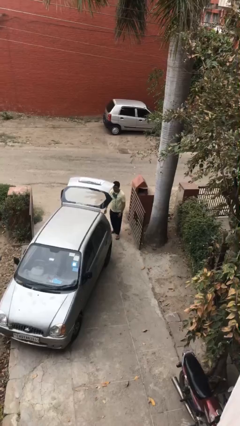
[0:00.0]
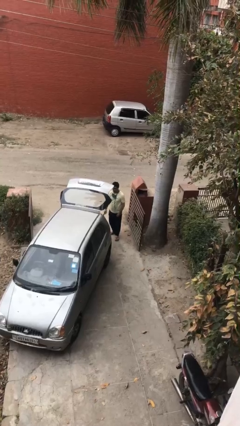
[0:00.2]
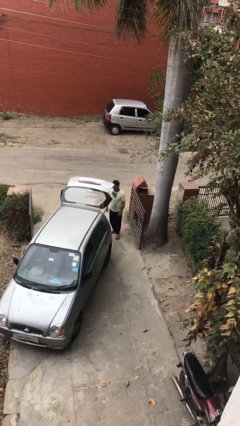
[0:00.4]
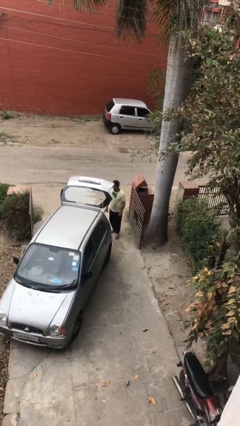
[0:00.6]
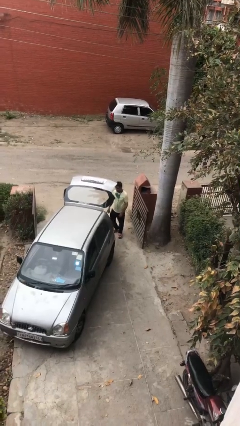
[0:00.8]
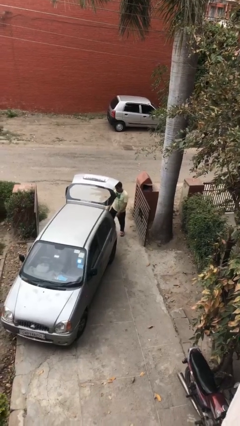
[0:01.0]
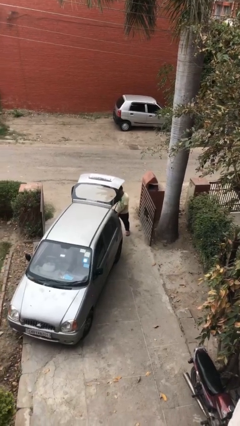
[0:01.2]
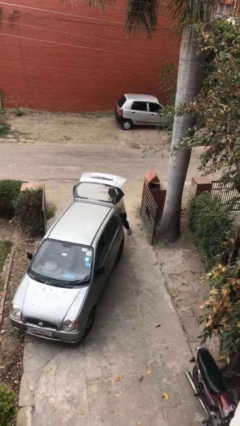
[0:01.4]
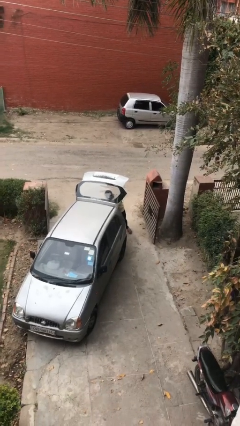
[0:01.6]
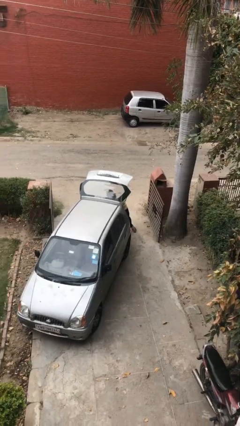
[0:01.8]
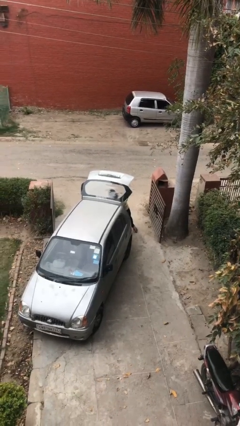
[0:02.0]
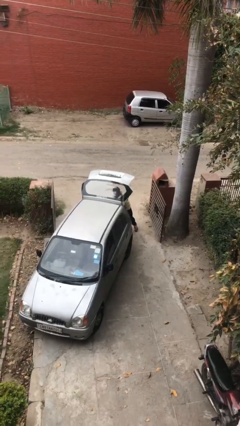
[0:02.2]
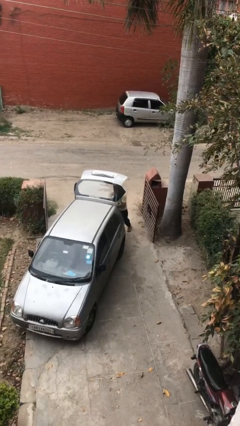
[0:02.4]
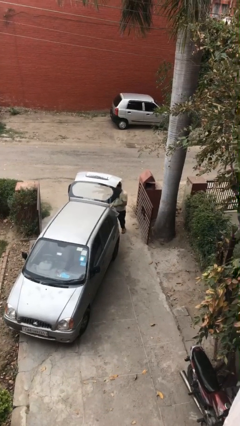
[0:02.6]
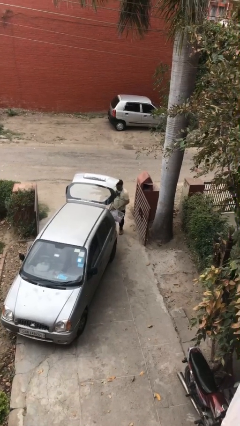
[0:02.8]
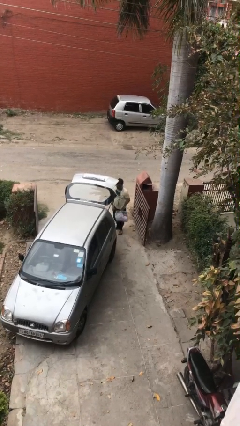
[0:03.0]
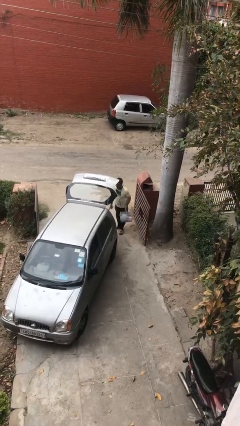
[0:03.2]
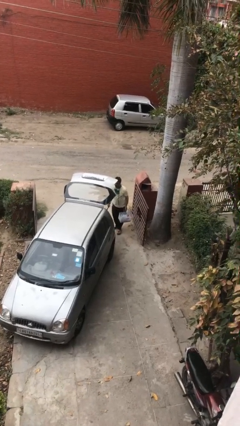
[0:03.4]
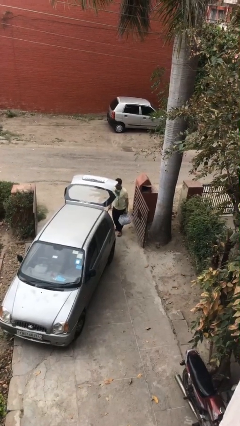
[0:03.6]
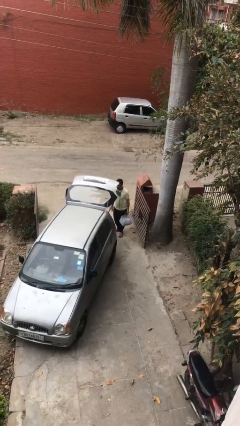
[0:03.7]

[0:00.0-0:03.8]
person unloads car

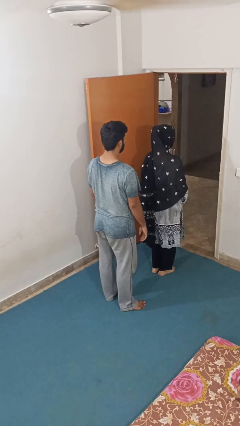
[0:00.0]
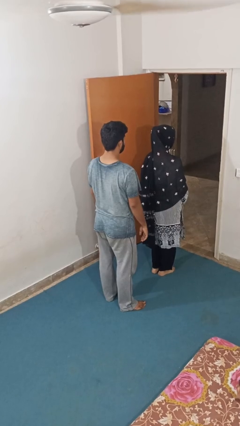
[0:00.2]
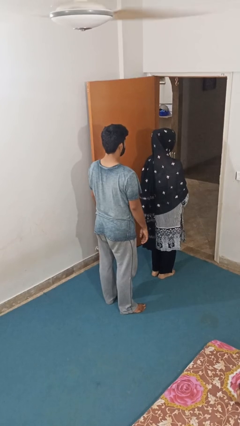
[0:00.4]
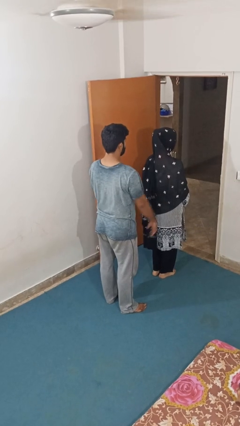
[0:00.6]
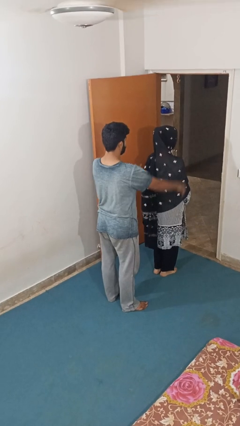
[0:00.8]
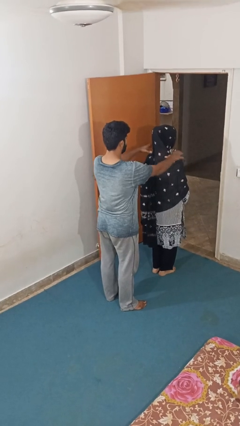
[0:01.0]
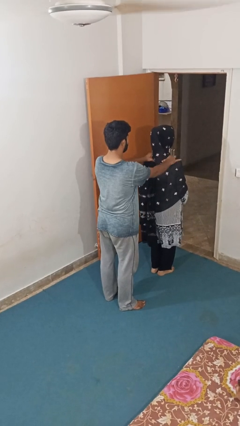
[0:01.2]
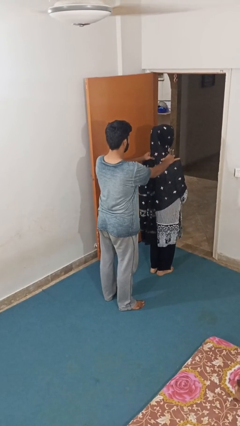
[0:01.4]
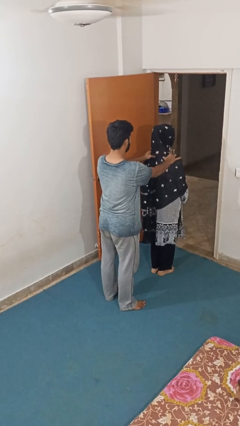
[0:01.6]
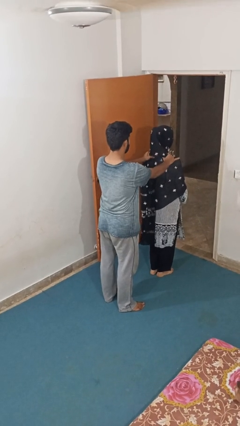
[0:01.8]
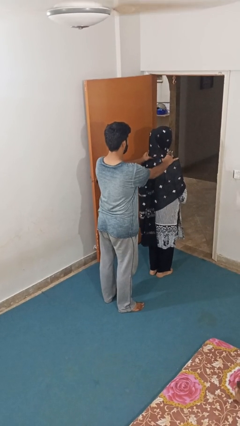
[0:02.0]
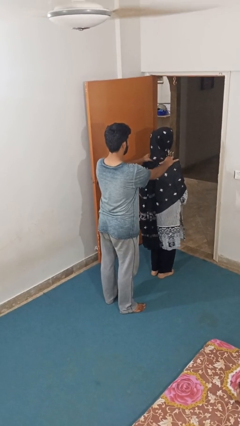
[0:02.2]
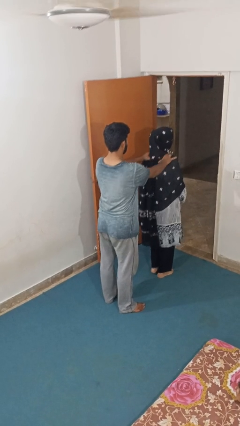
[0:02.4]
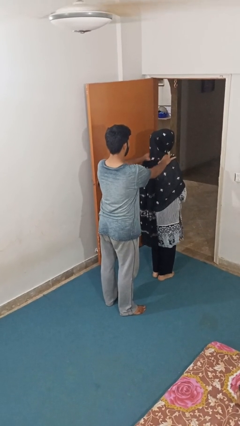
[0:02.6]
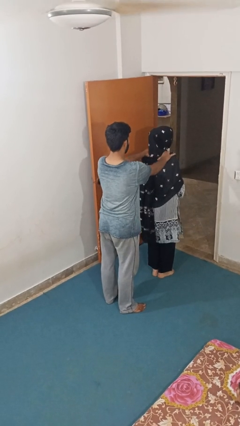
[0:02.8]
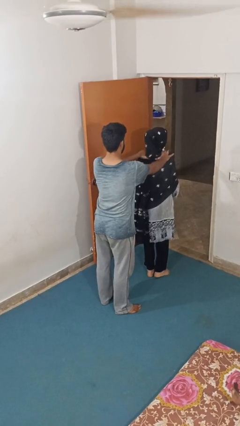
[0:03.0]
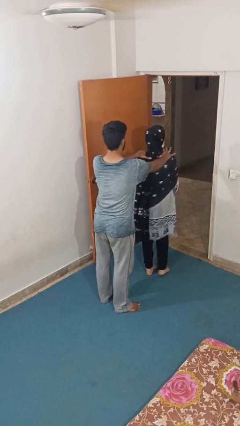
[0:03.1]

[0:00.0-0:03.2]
person grabs person by shoulder

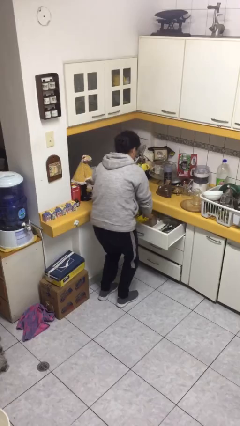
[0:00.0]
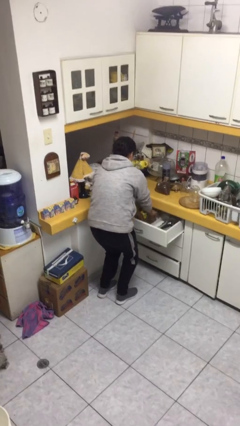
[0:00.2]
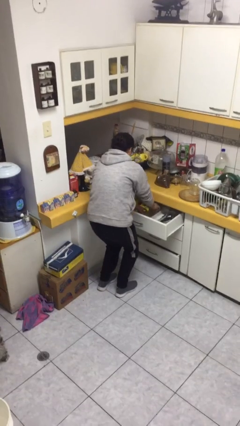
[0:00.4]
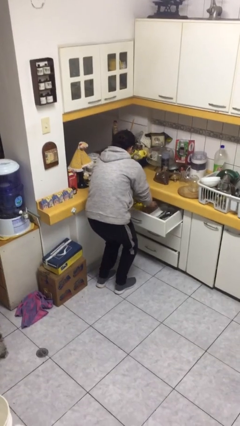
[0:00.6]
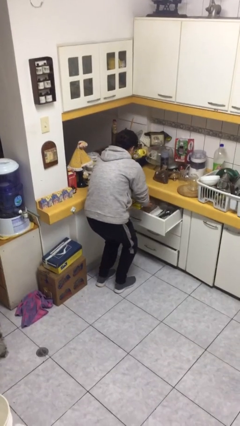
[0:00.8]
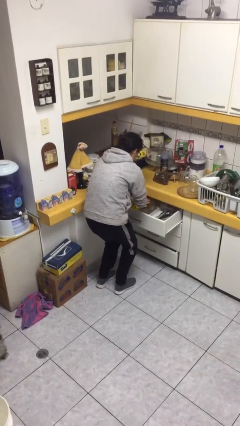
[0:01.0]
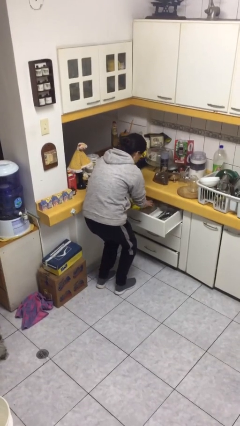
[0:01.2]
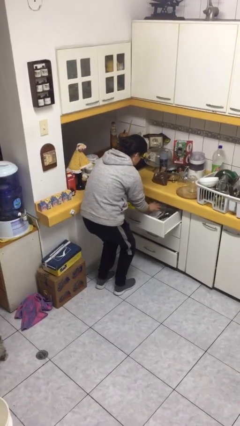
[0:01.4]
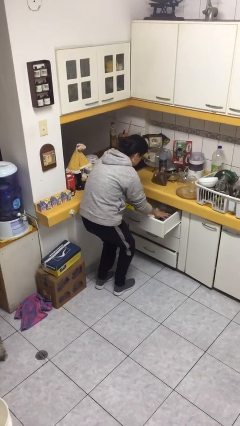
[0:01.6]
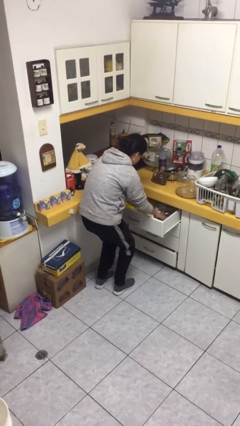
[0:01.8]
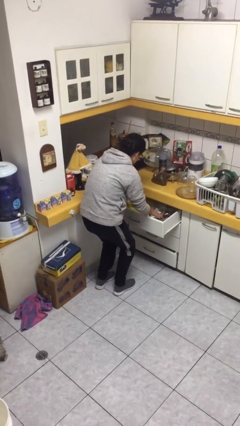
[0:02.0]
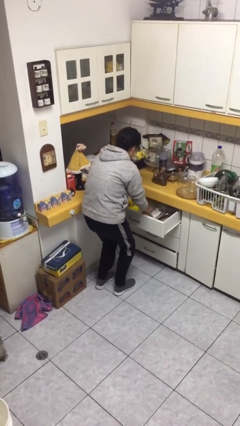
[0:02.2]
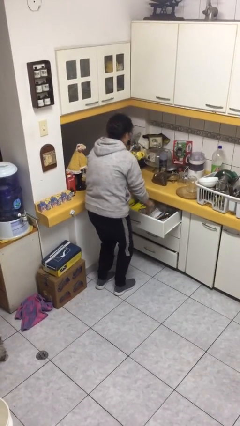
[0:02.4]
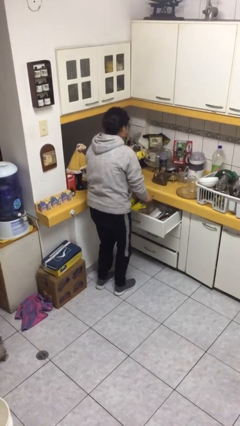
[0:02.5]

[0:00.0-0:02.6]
person searches in kitchen drawer

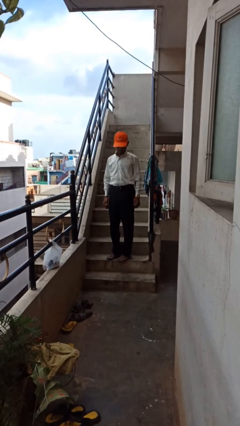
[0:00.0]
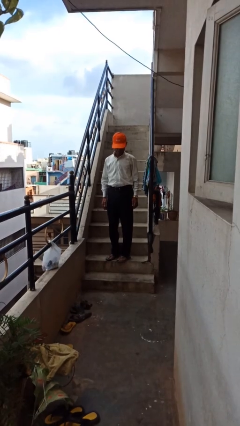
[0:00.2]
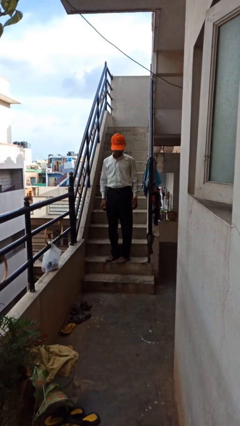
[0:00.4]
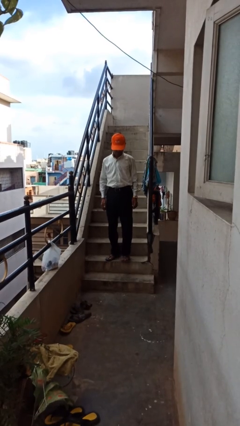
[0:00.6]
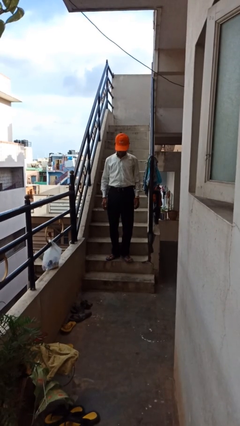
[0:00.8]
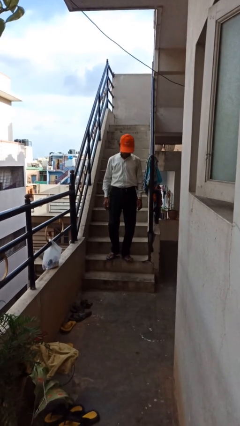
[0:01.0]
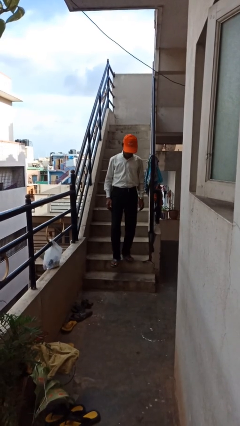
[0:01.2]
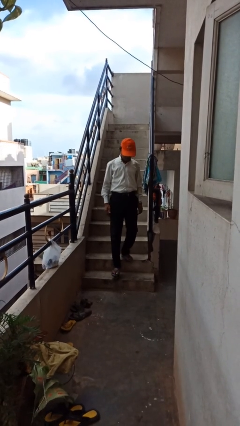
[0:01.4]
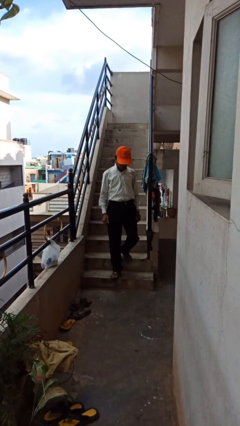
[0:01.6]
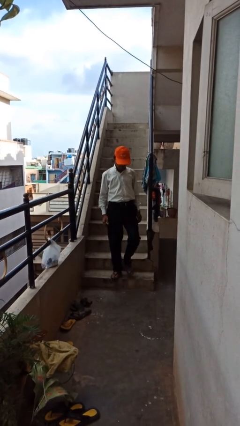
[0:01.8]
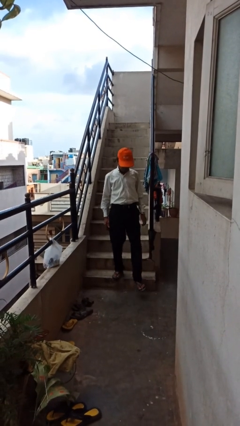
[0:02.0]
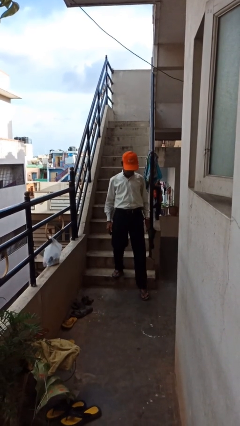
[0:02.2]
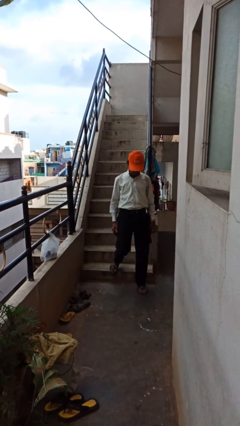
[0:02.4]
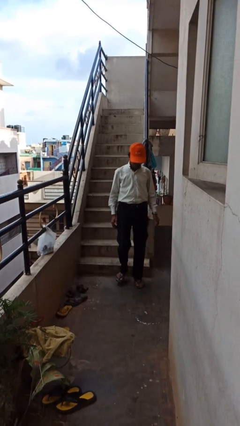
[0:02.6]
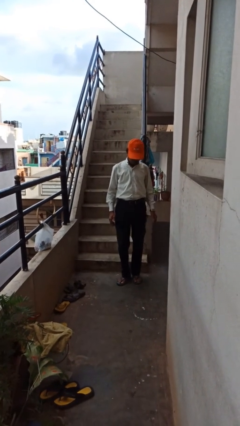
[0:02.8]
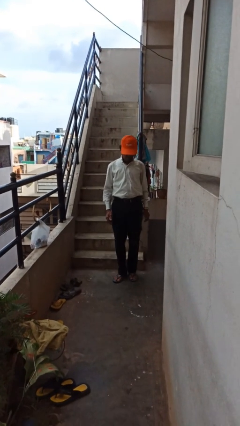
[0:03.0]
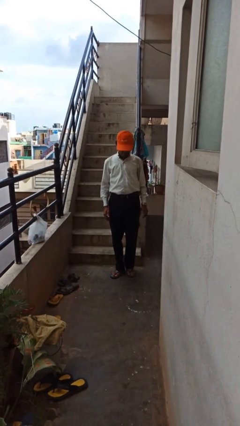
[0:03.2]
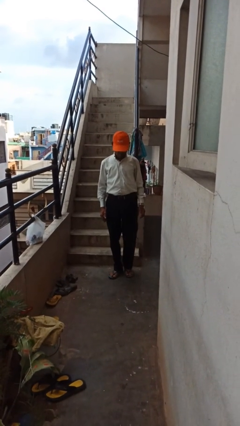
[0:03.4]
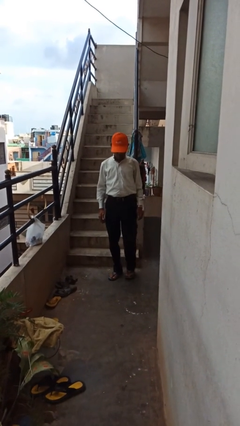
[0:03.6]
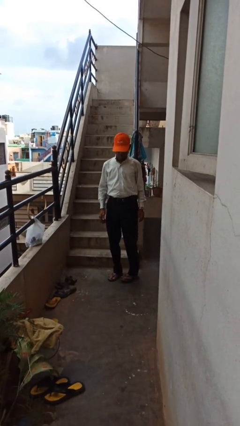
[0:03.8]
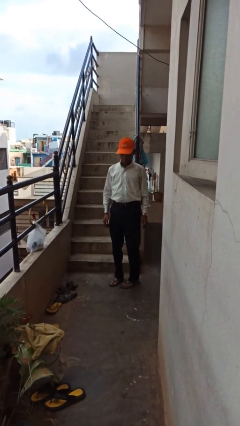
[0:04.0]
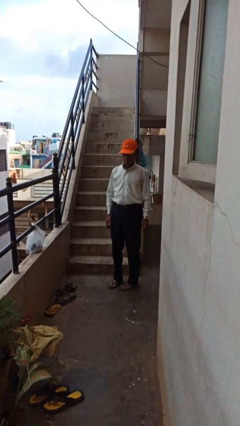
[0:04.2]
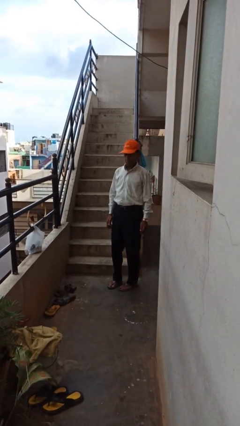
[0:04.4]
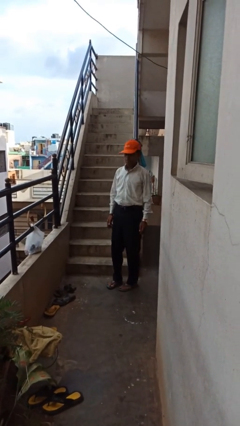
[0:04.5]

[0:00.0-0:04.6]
person climbs down stairs

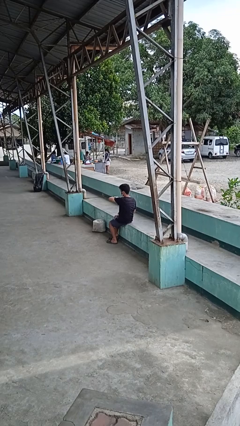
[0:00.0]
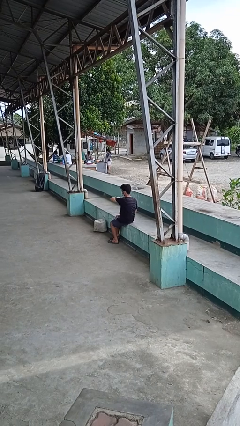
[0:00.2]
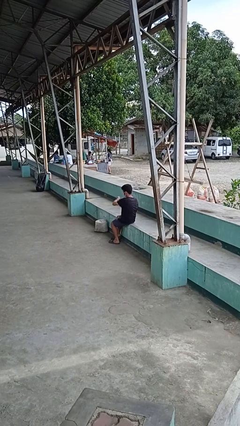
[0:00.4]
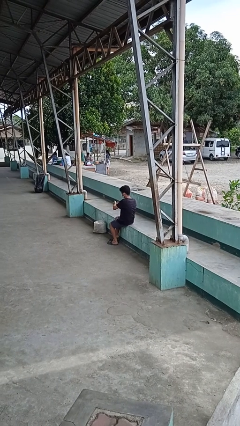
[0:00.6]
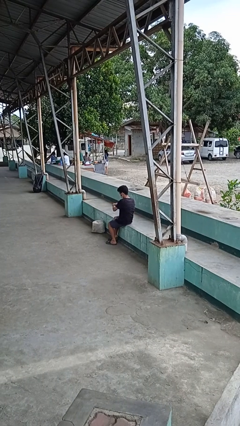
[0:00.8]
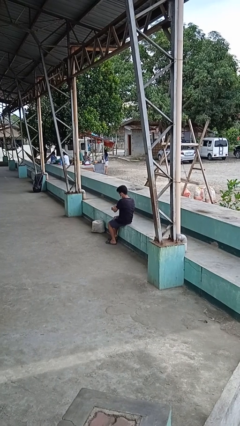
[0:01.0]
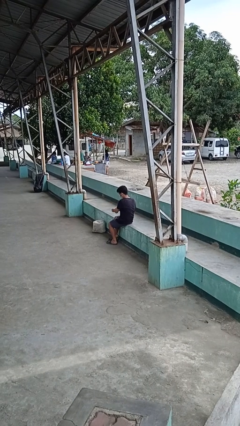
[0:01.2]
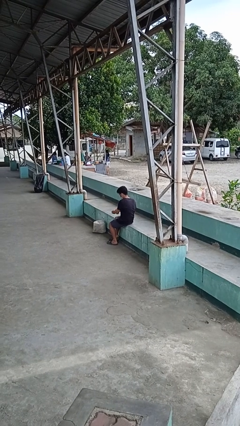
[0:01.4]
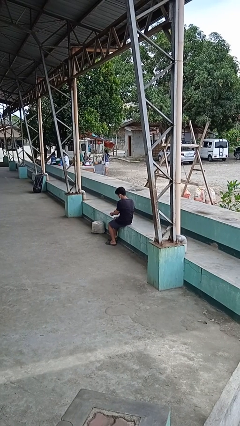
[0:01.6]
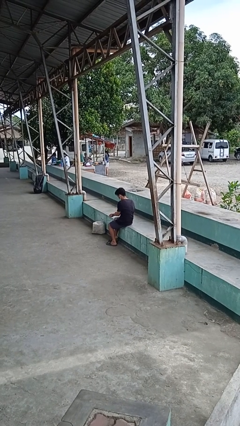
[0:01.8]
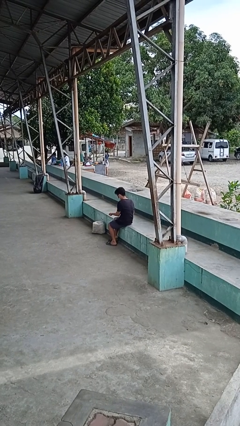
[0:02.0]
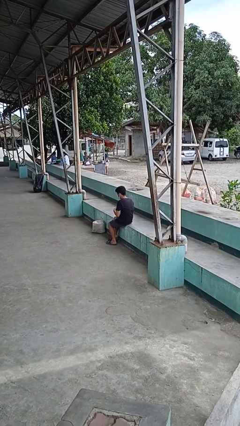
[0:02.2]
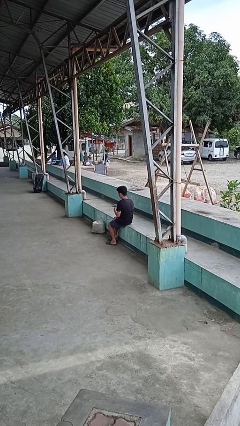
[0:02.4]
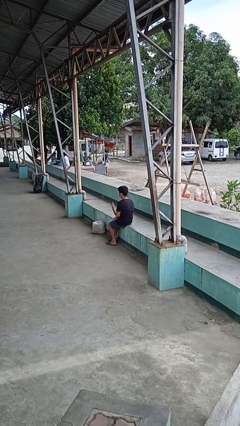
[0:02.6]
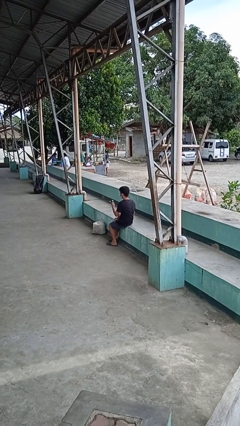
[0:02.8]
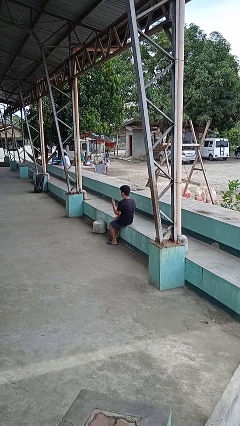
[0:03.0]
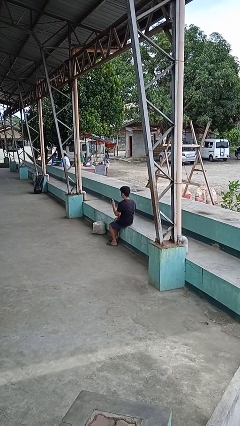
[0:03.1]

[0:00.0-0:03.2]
person takes off wristwatch

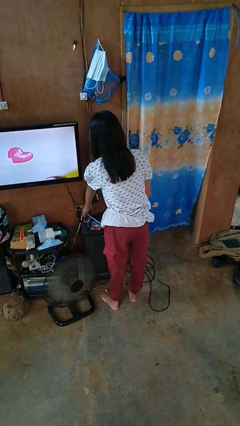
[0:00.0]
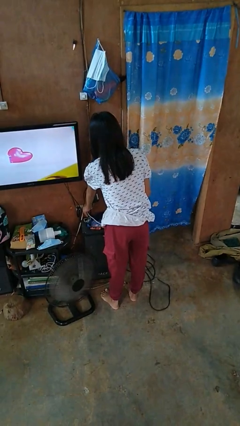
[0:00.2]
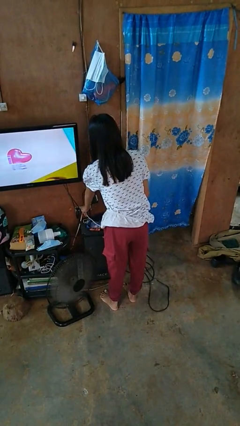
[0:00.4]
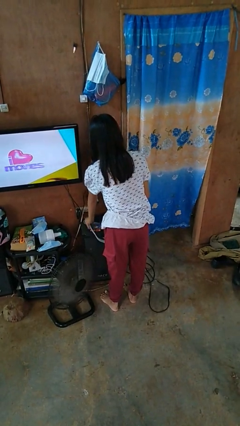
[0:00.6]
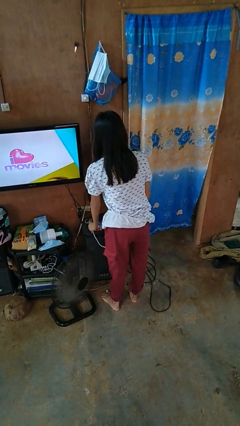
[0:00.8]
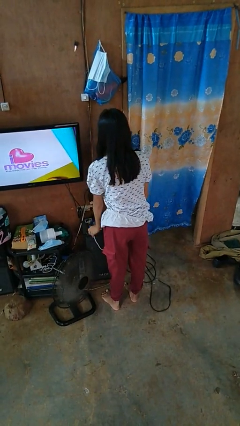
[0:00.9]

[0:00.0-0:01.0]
person unplugs from electrical socket
